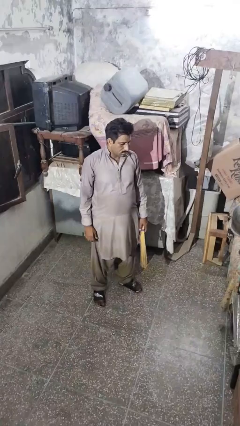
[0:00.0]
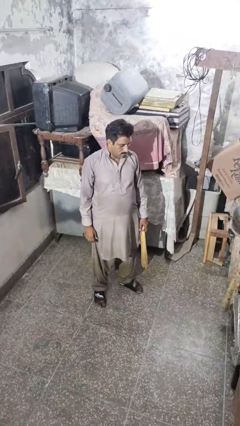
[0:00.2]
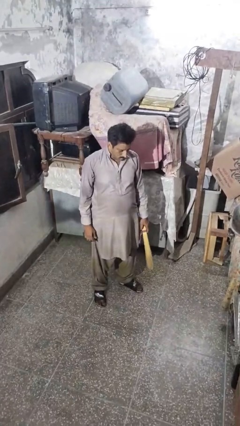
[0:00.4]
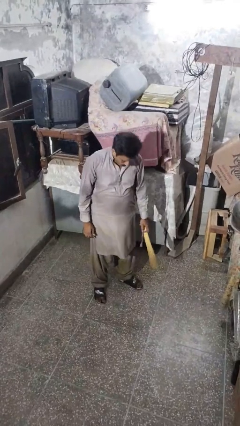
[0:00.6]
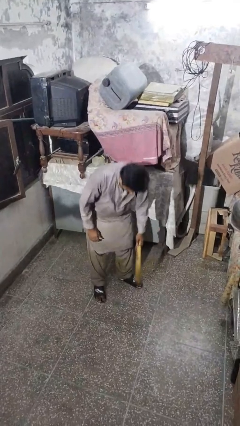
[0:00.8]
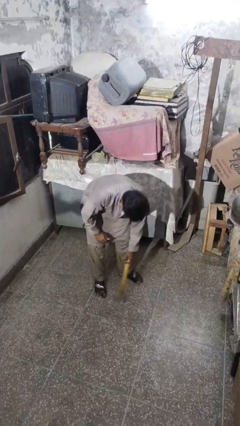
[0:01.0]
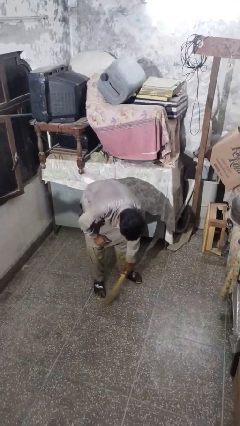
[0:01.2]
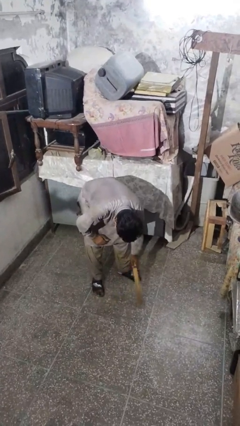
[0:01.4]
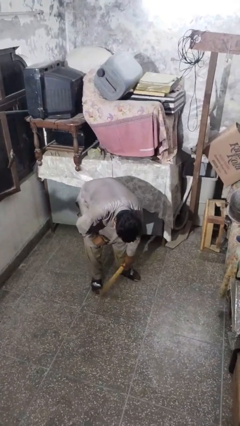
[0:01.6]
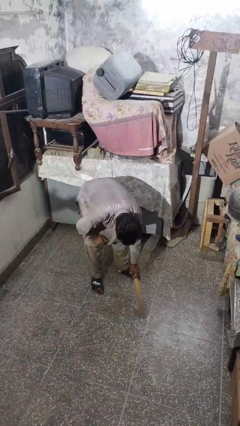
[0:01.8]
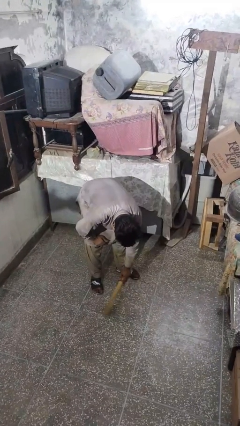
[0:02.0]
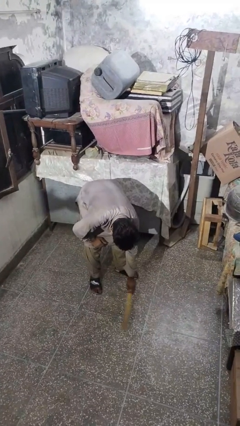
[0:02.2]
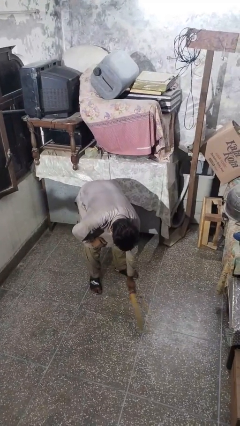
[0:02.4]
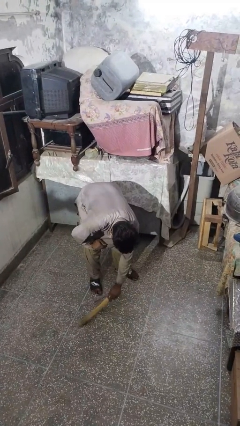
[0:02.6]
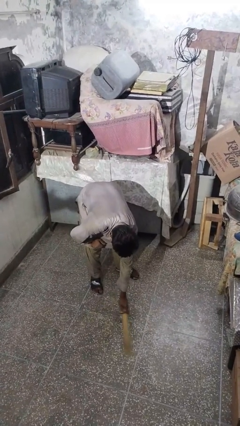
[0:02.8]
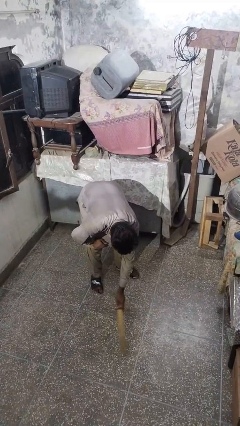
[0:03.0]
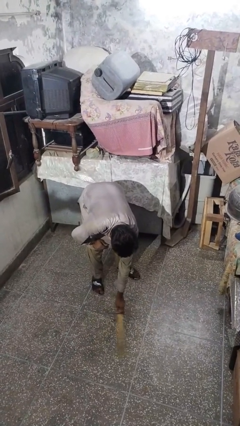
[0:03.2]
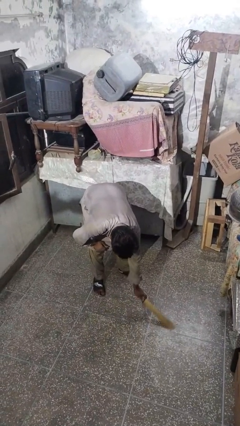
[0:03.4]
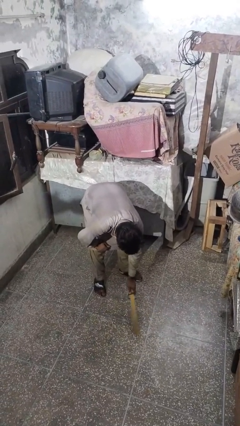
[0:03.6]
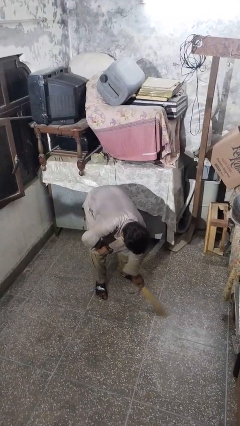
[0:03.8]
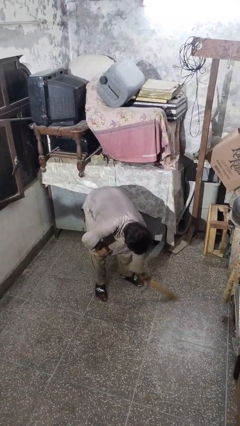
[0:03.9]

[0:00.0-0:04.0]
person sweeps floor

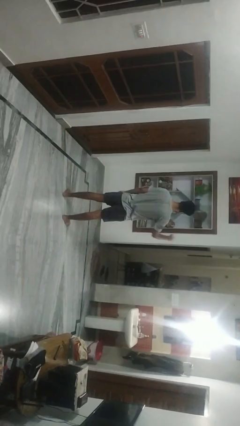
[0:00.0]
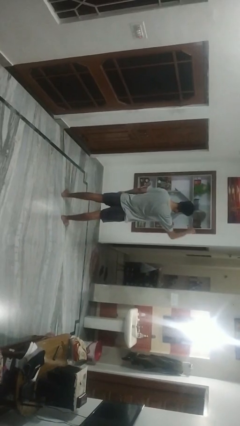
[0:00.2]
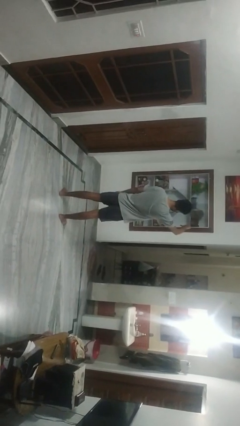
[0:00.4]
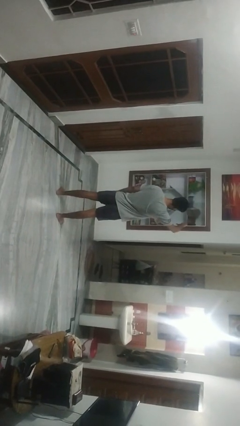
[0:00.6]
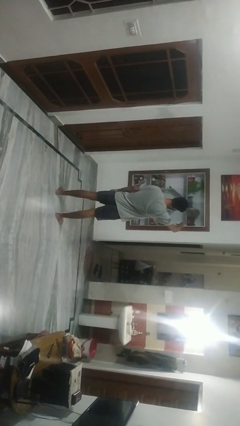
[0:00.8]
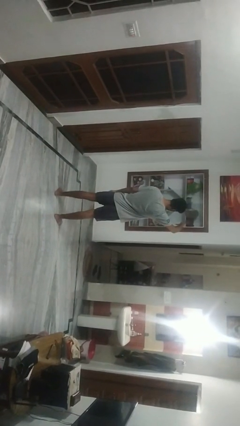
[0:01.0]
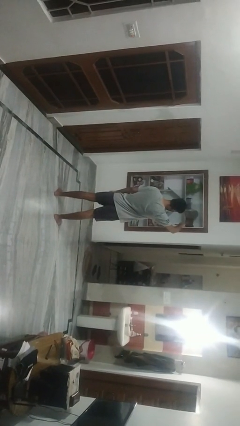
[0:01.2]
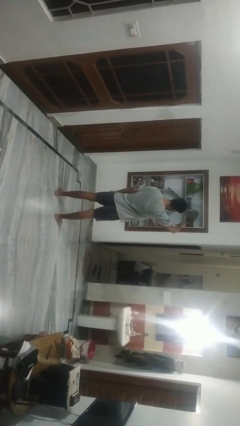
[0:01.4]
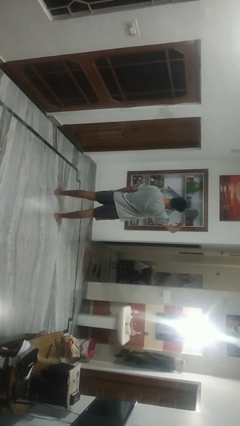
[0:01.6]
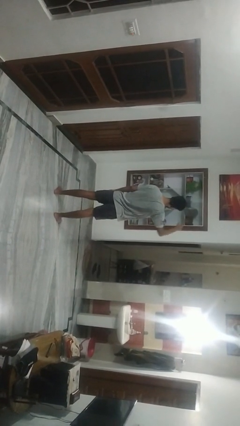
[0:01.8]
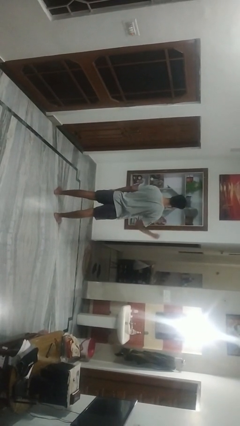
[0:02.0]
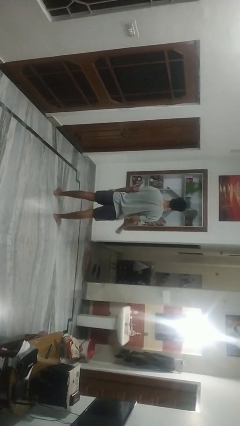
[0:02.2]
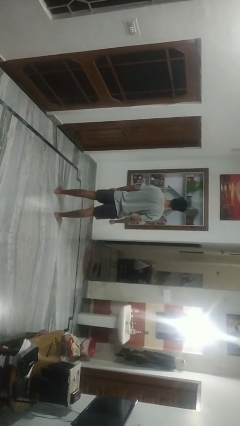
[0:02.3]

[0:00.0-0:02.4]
person gestures thumbs down

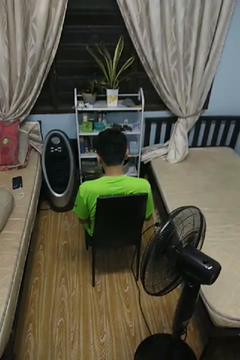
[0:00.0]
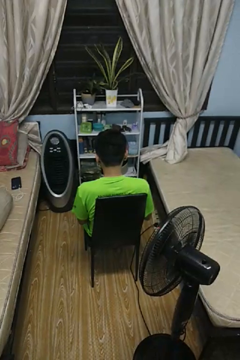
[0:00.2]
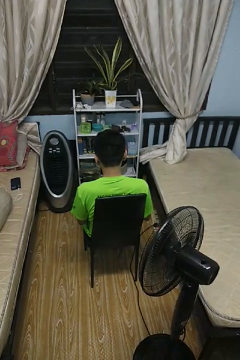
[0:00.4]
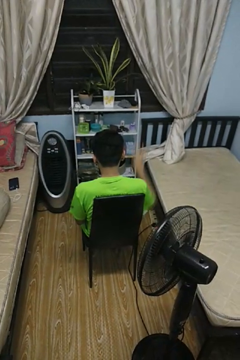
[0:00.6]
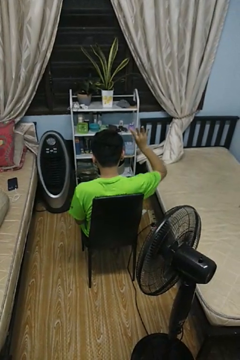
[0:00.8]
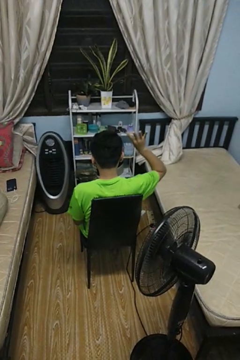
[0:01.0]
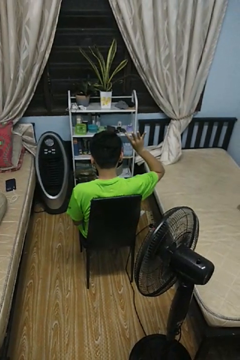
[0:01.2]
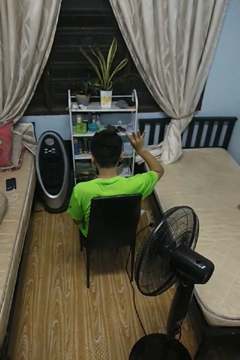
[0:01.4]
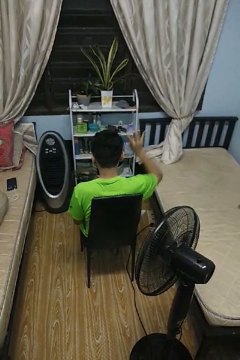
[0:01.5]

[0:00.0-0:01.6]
person gestures number four

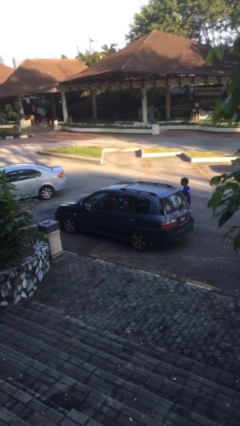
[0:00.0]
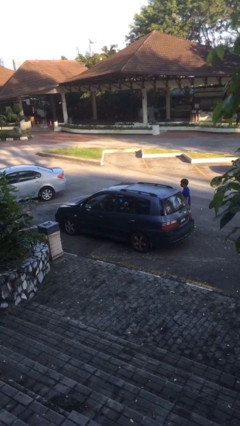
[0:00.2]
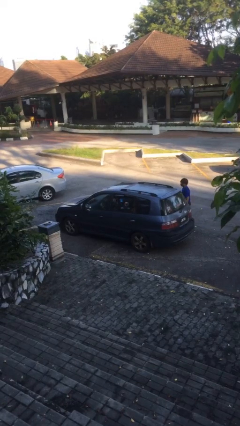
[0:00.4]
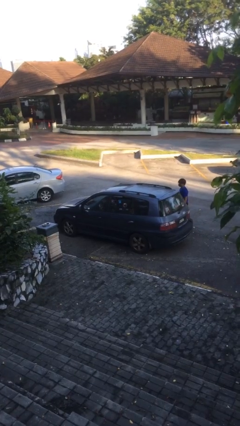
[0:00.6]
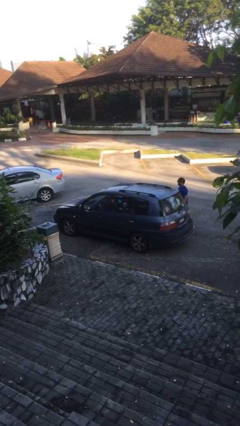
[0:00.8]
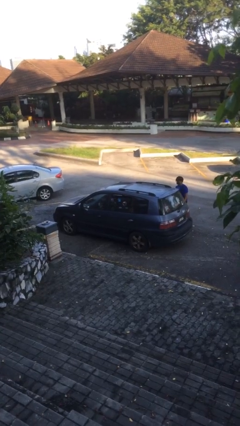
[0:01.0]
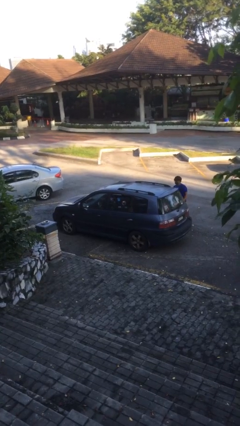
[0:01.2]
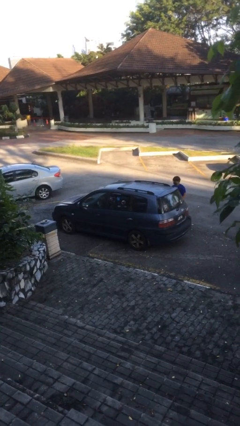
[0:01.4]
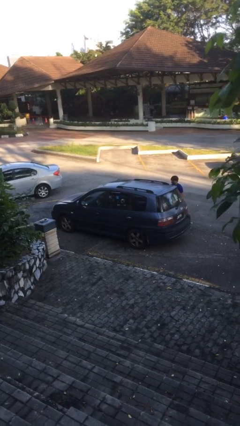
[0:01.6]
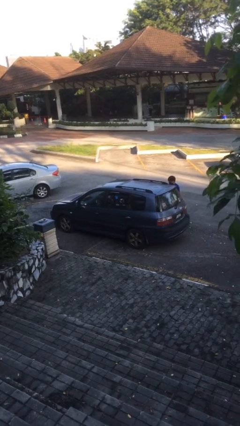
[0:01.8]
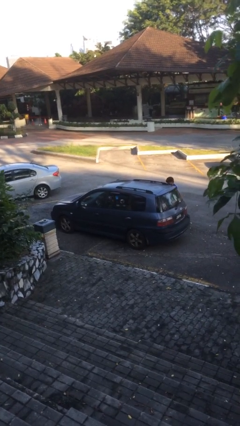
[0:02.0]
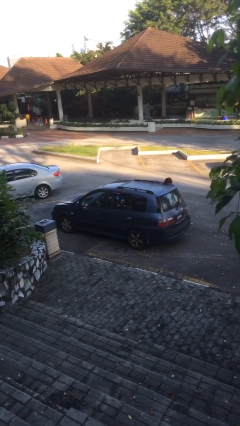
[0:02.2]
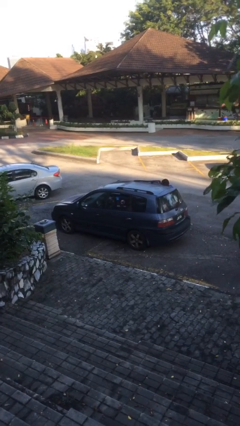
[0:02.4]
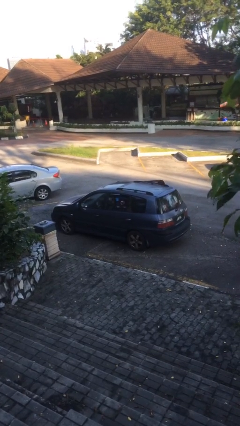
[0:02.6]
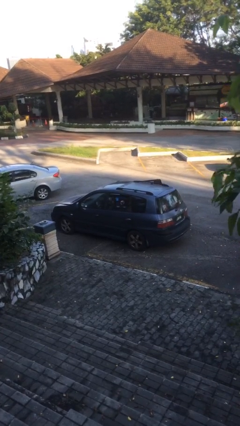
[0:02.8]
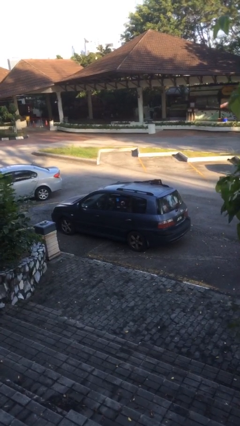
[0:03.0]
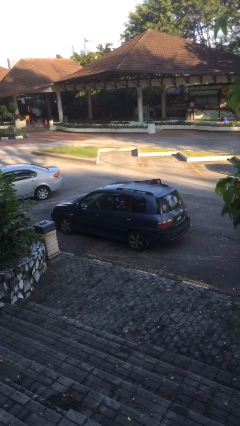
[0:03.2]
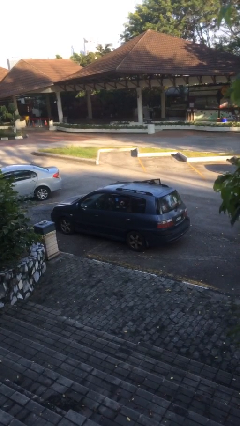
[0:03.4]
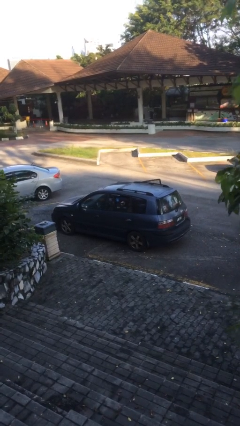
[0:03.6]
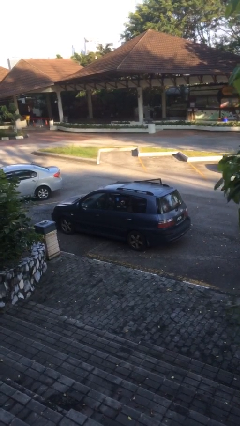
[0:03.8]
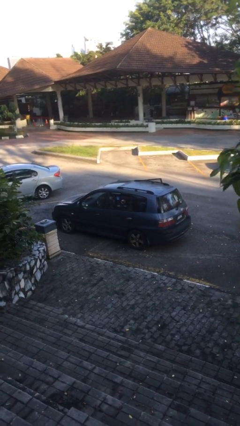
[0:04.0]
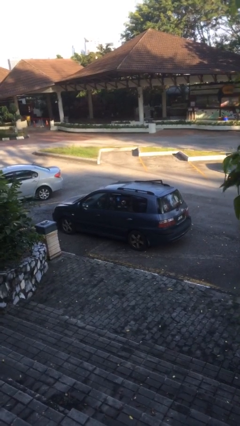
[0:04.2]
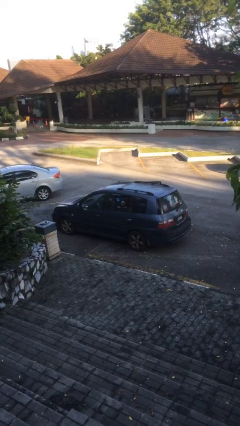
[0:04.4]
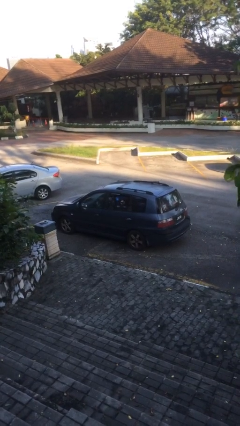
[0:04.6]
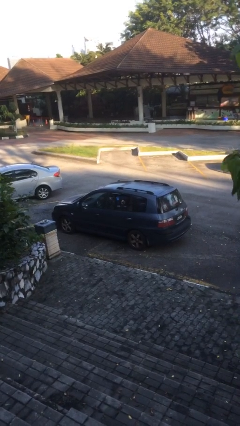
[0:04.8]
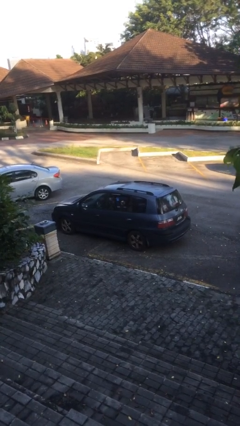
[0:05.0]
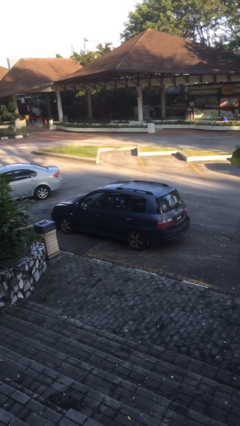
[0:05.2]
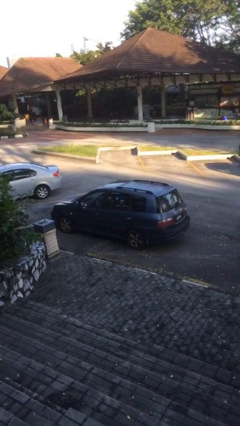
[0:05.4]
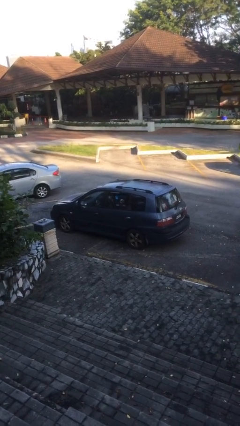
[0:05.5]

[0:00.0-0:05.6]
car picks up person

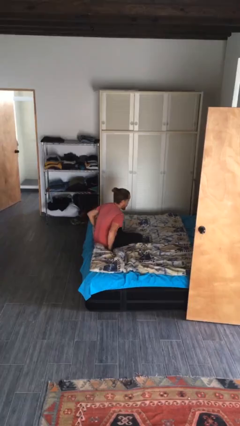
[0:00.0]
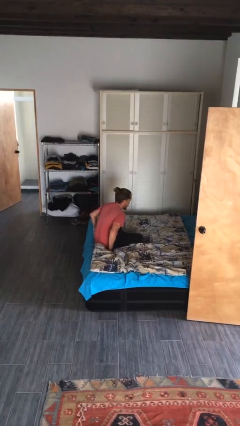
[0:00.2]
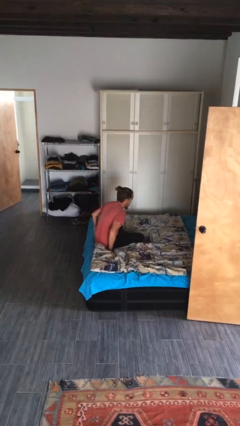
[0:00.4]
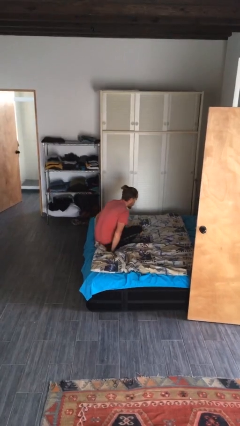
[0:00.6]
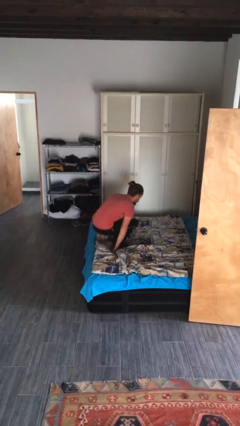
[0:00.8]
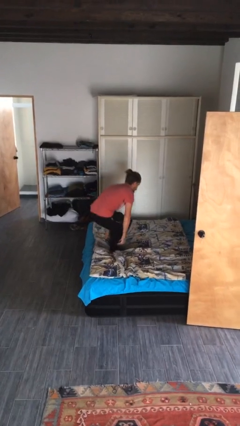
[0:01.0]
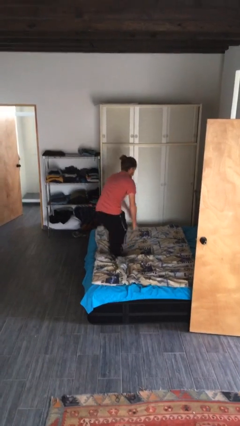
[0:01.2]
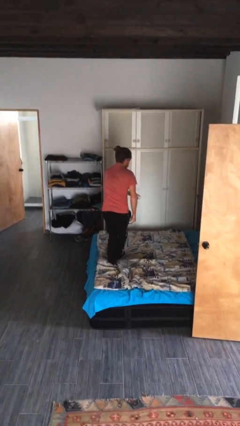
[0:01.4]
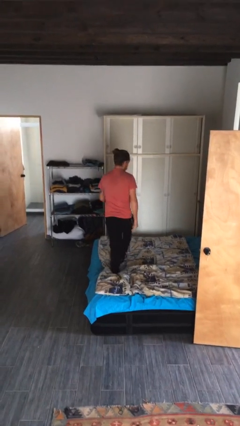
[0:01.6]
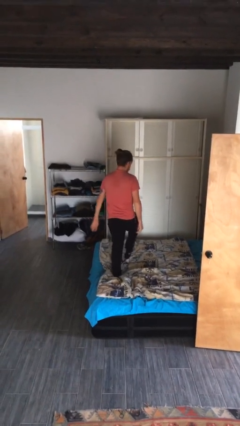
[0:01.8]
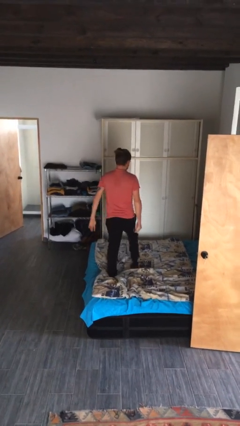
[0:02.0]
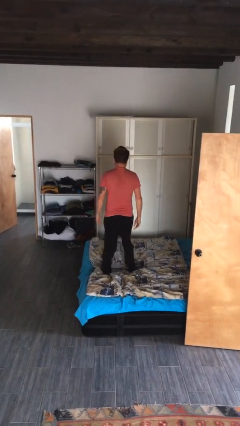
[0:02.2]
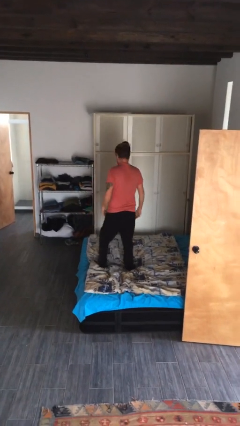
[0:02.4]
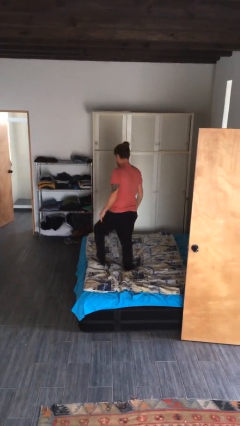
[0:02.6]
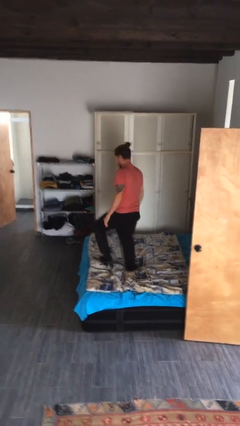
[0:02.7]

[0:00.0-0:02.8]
person stands up from floor

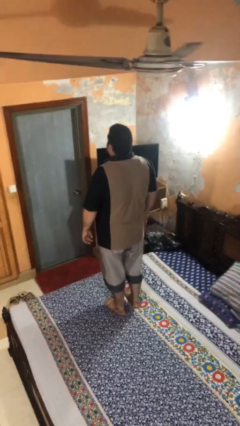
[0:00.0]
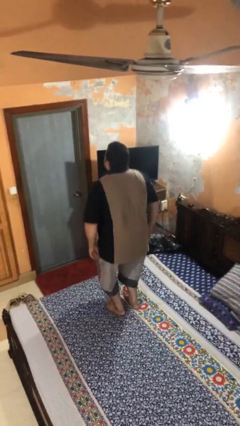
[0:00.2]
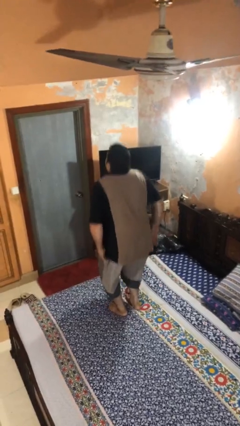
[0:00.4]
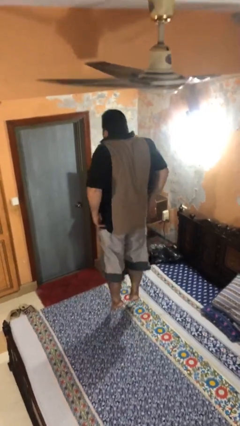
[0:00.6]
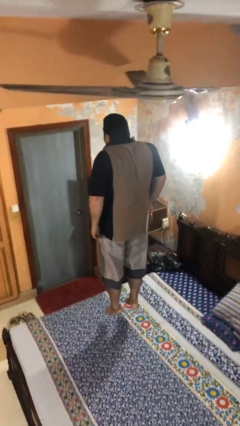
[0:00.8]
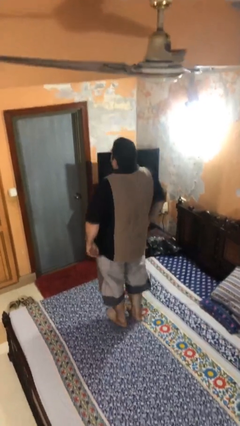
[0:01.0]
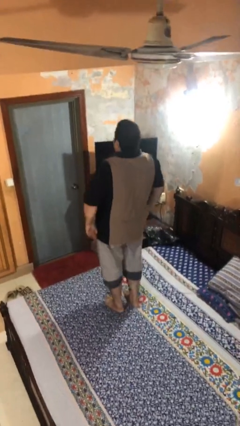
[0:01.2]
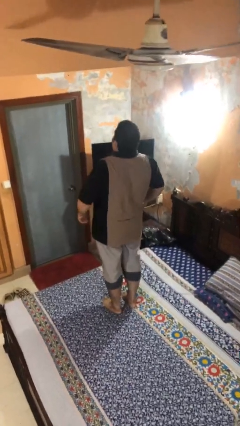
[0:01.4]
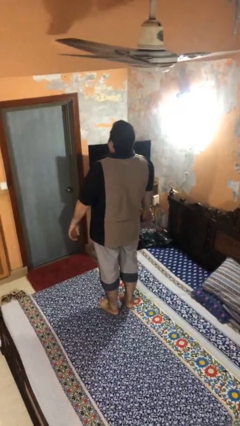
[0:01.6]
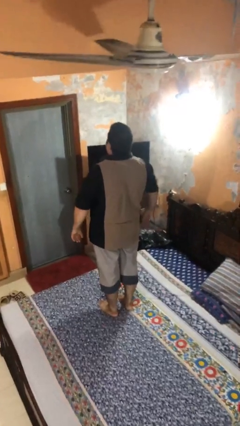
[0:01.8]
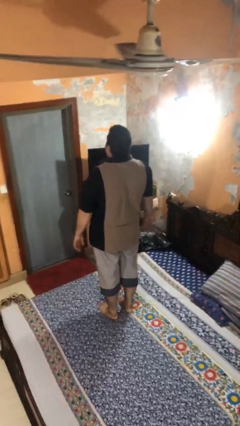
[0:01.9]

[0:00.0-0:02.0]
person jumps on bed
